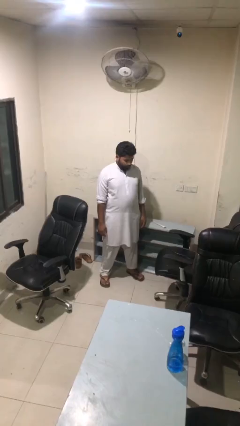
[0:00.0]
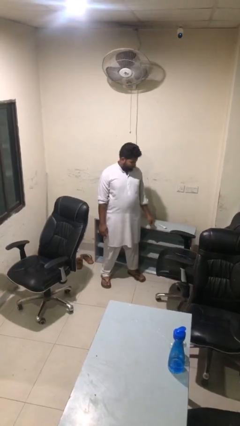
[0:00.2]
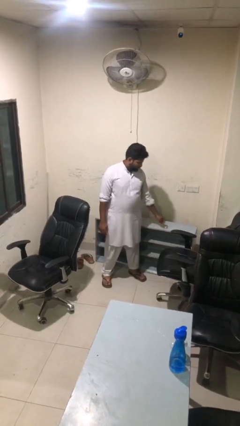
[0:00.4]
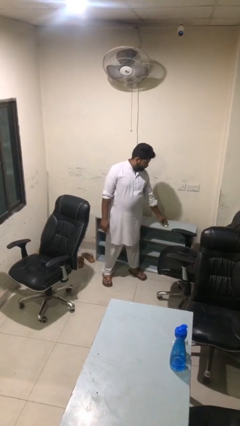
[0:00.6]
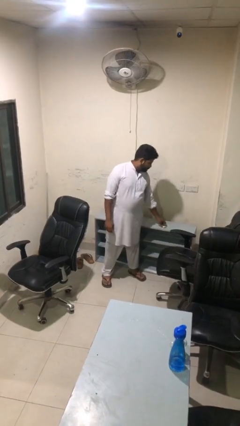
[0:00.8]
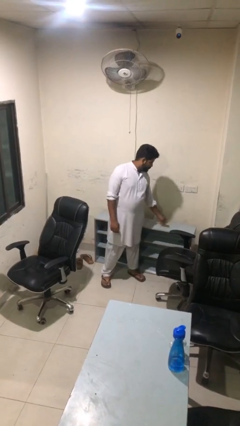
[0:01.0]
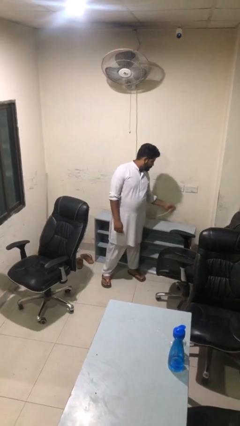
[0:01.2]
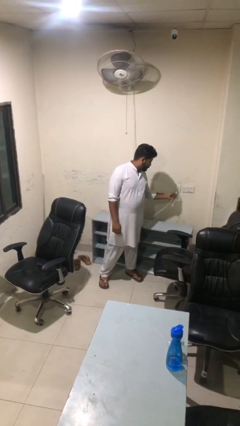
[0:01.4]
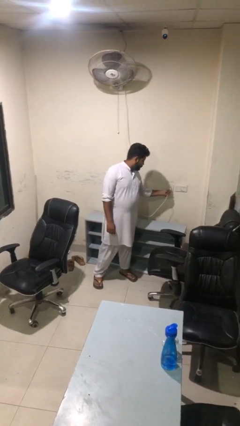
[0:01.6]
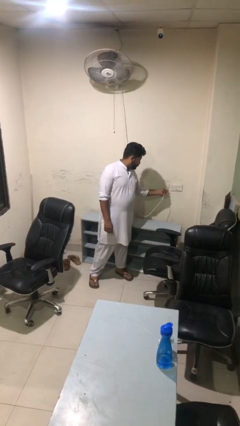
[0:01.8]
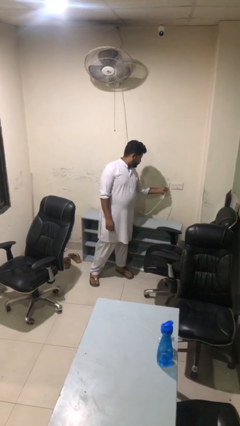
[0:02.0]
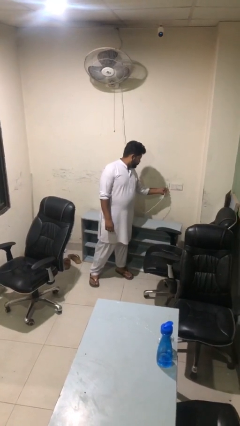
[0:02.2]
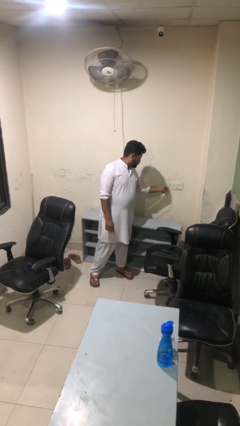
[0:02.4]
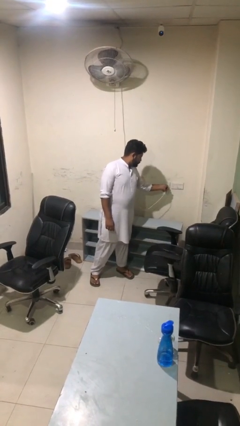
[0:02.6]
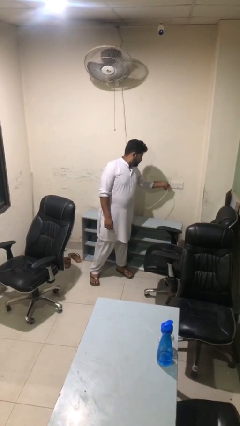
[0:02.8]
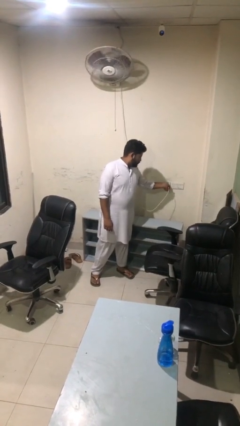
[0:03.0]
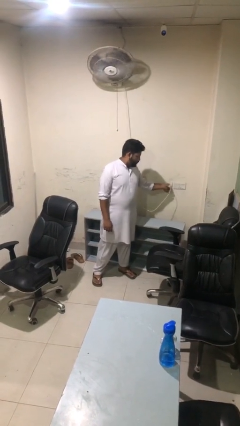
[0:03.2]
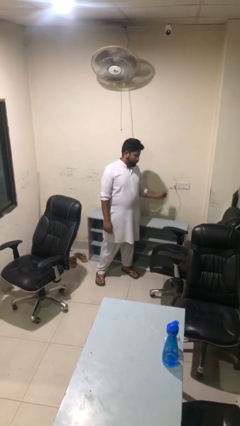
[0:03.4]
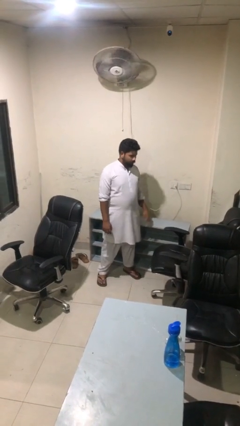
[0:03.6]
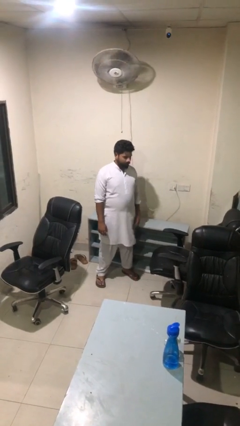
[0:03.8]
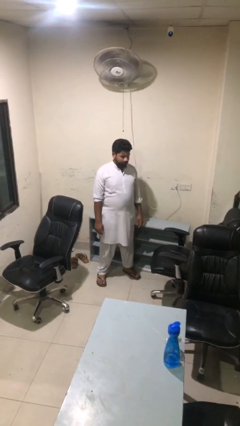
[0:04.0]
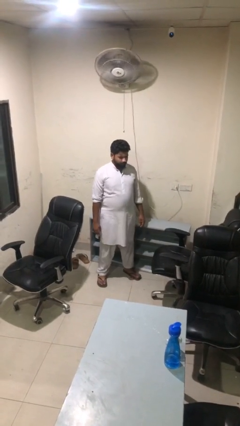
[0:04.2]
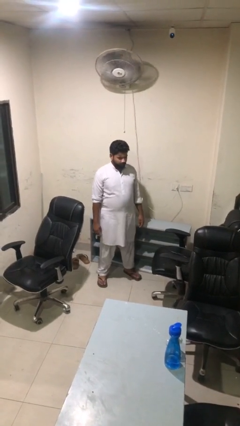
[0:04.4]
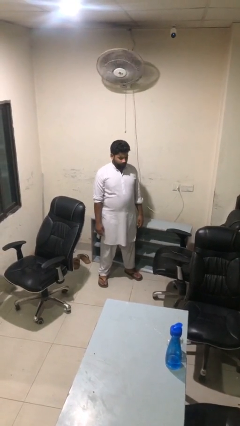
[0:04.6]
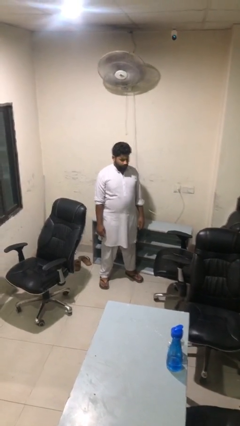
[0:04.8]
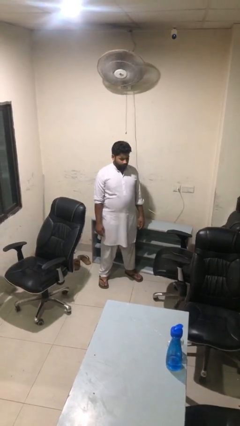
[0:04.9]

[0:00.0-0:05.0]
person plugs into electrical socket

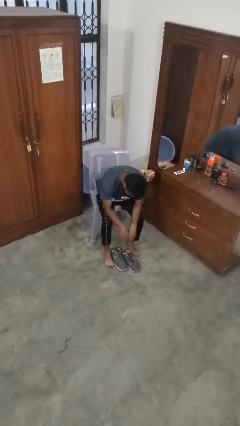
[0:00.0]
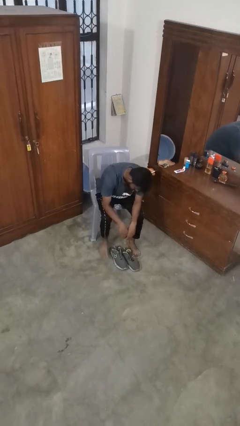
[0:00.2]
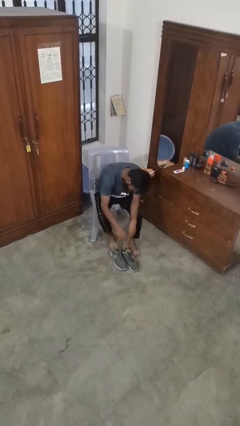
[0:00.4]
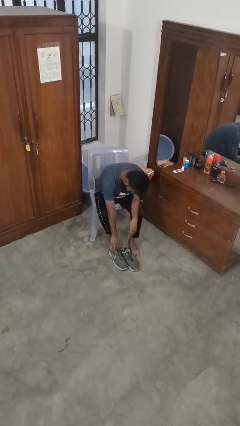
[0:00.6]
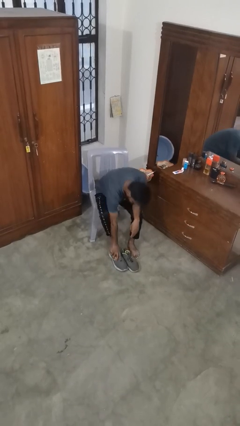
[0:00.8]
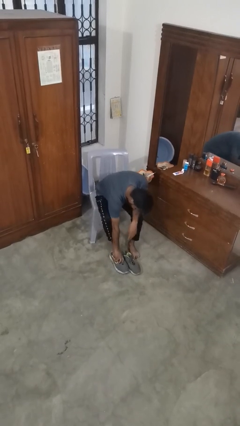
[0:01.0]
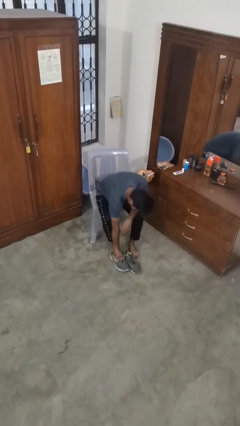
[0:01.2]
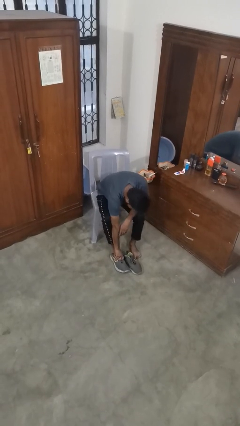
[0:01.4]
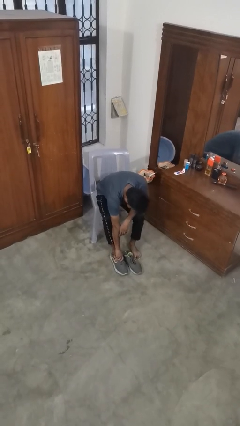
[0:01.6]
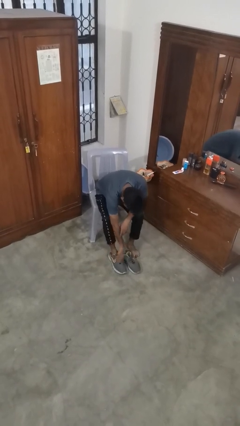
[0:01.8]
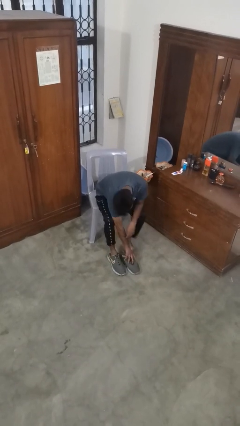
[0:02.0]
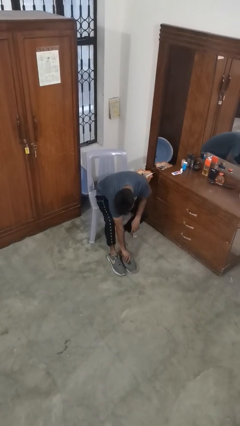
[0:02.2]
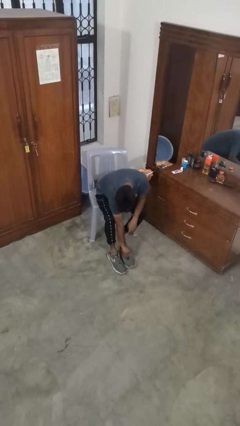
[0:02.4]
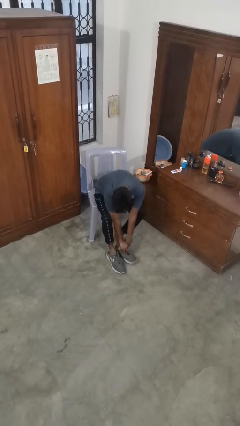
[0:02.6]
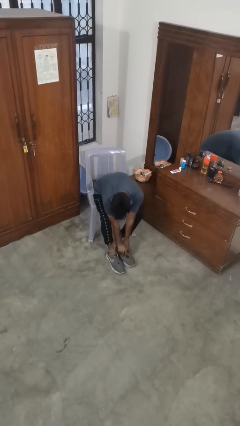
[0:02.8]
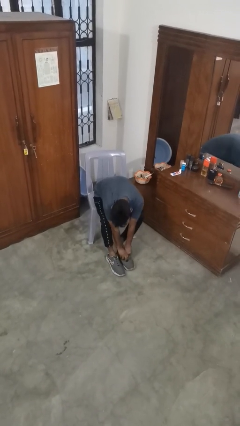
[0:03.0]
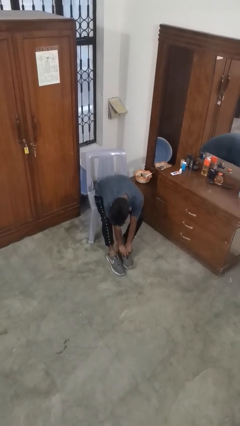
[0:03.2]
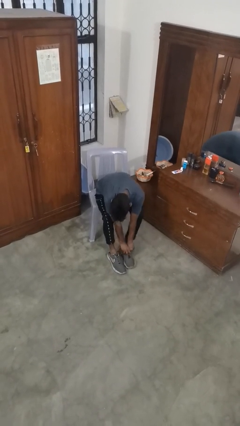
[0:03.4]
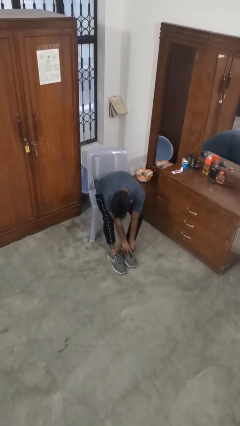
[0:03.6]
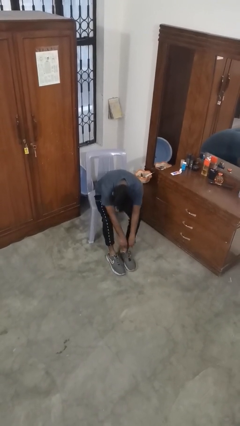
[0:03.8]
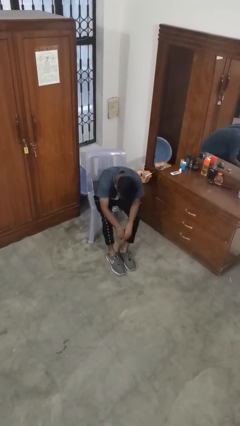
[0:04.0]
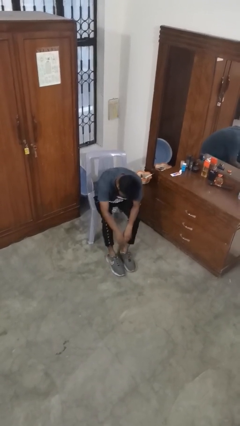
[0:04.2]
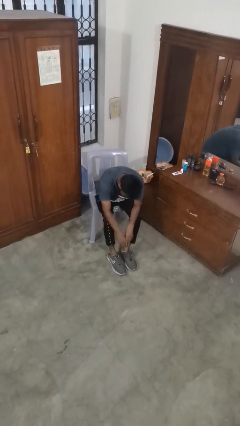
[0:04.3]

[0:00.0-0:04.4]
person puts on shoes

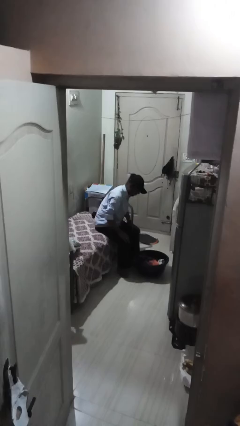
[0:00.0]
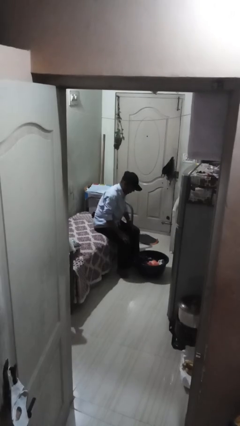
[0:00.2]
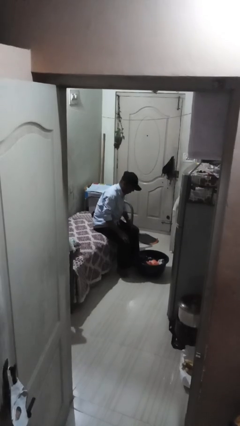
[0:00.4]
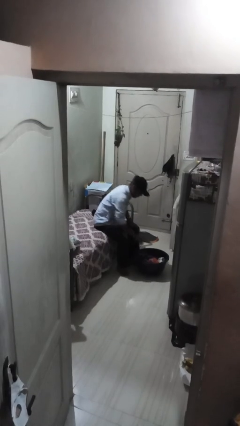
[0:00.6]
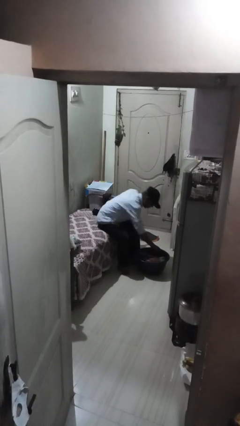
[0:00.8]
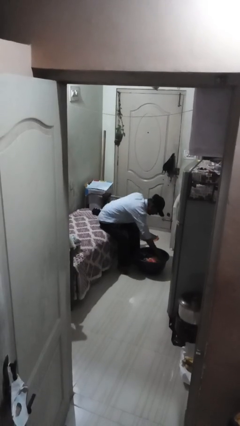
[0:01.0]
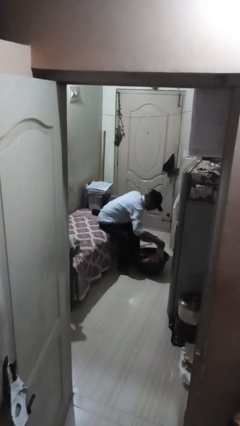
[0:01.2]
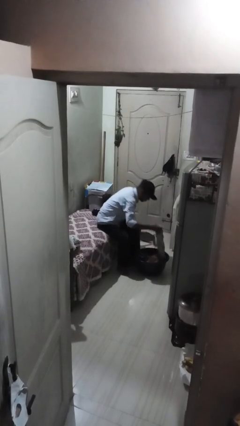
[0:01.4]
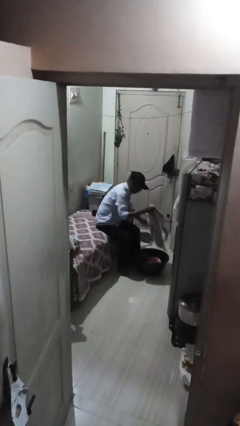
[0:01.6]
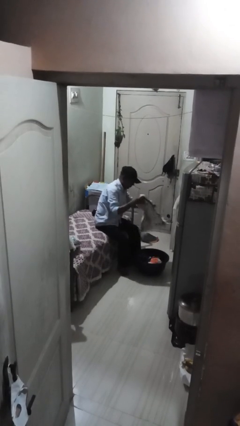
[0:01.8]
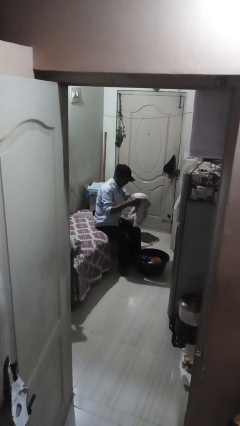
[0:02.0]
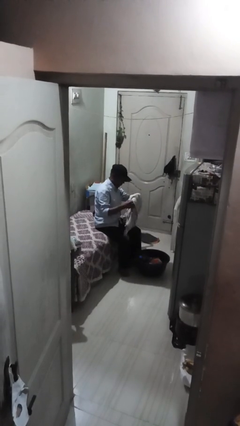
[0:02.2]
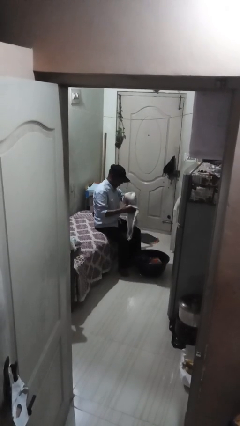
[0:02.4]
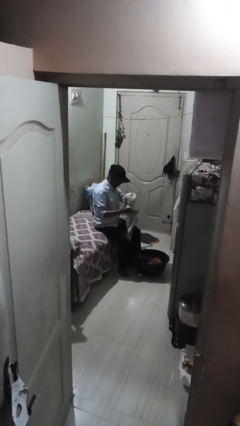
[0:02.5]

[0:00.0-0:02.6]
person takes object from basket

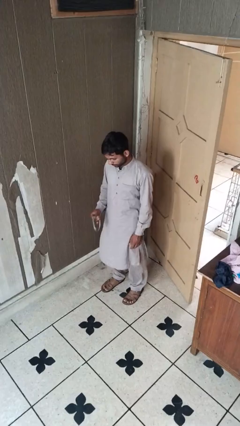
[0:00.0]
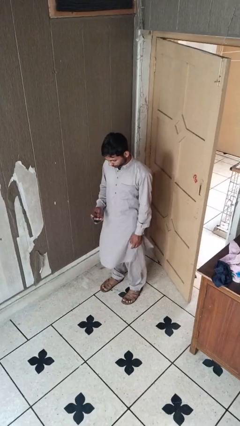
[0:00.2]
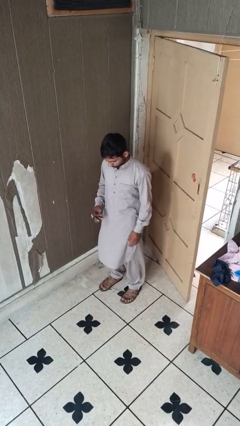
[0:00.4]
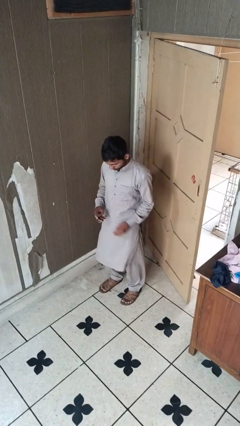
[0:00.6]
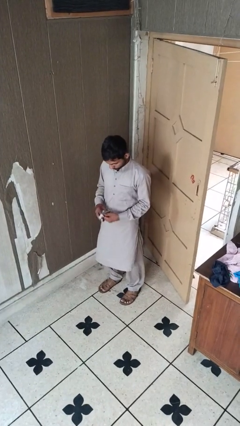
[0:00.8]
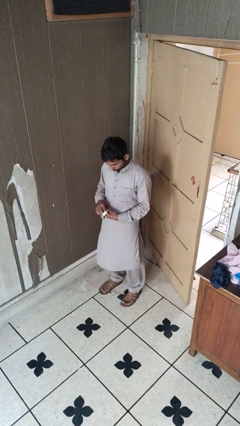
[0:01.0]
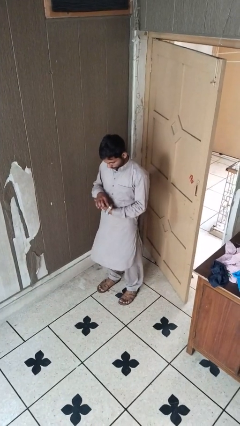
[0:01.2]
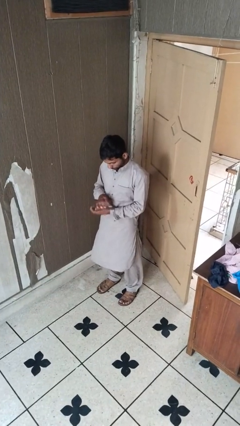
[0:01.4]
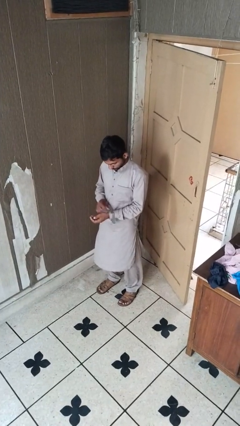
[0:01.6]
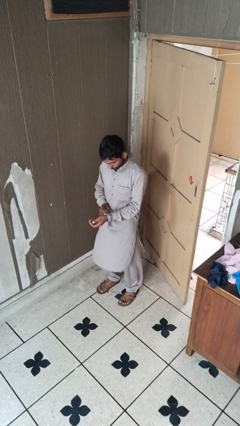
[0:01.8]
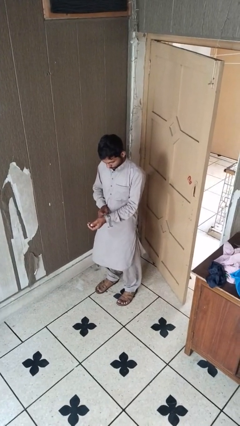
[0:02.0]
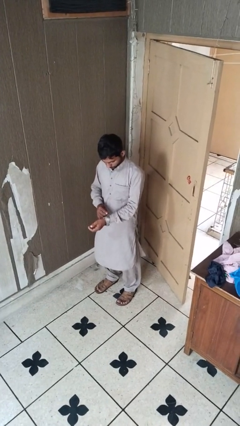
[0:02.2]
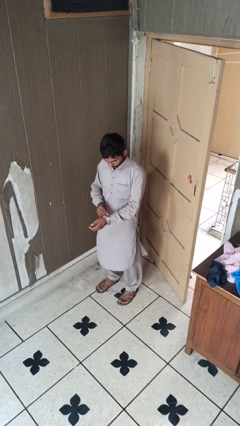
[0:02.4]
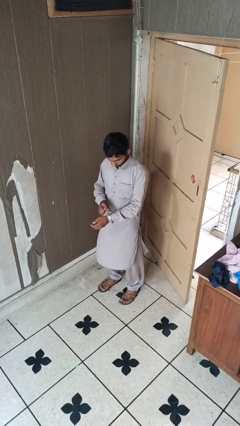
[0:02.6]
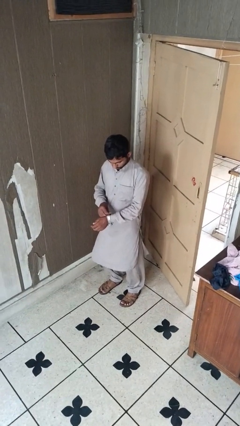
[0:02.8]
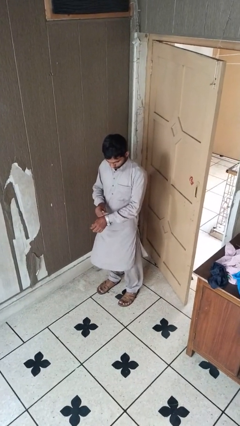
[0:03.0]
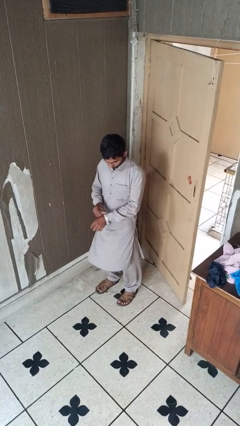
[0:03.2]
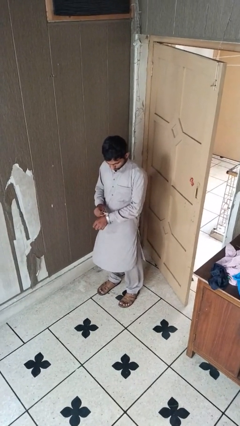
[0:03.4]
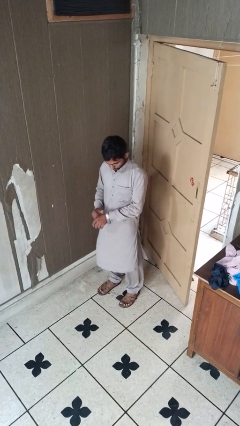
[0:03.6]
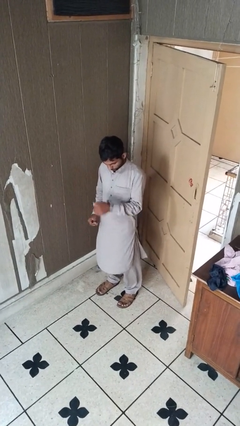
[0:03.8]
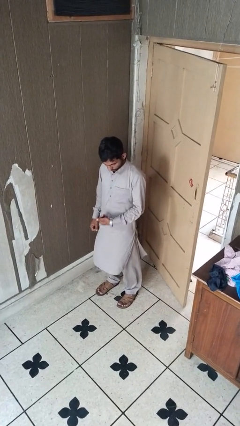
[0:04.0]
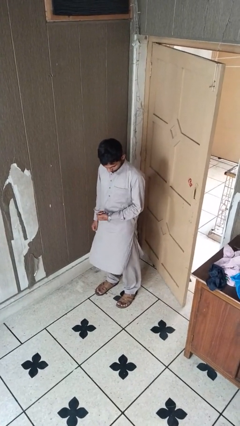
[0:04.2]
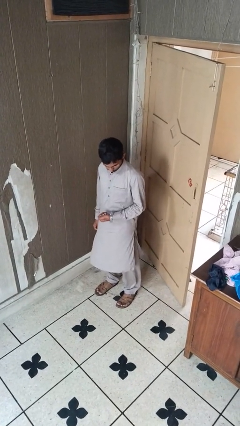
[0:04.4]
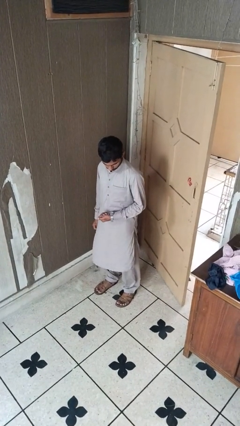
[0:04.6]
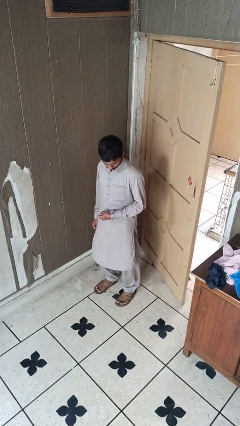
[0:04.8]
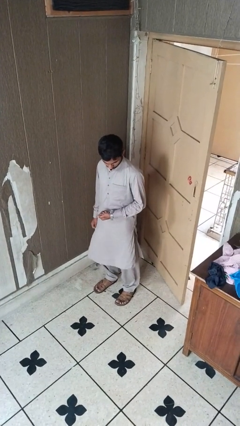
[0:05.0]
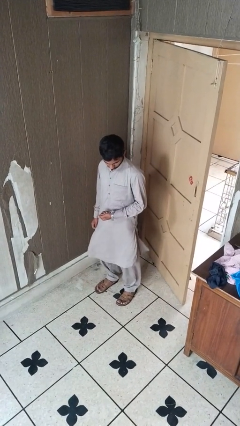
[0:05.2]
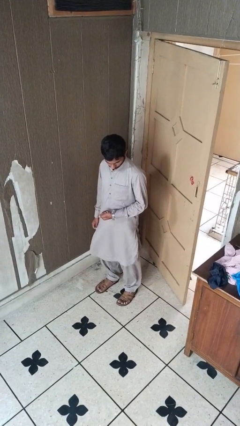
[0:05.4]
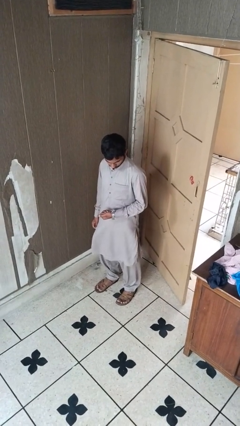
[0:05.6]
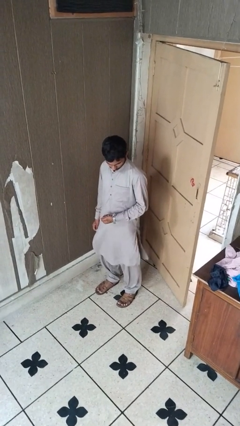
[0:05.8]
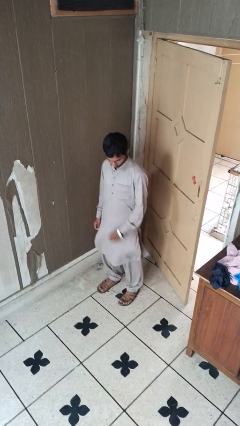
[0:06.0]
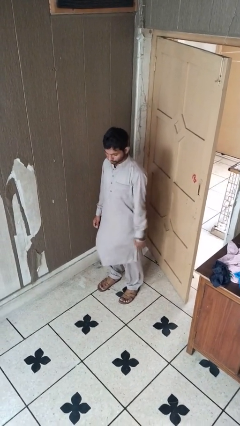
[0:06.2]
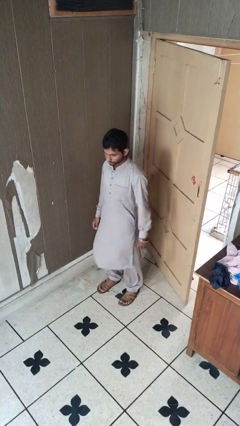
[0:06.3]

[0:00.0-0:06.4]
person puts on wristwatch
